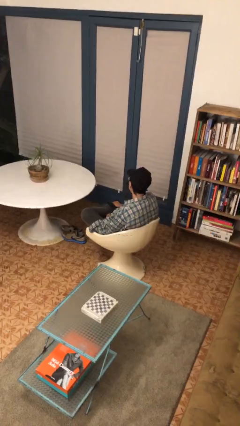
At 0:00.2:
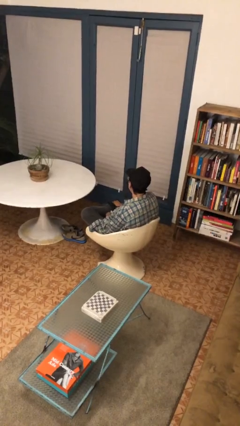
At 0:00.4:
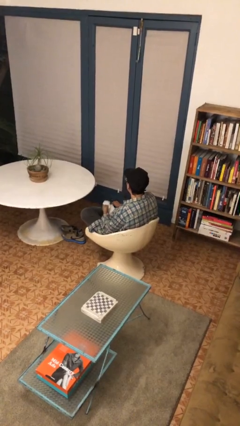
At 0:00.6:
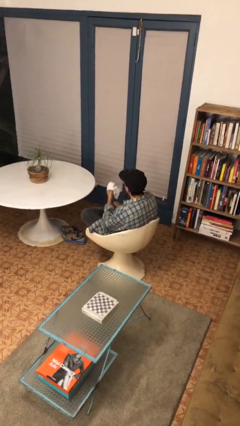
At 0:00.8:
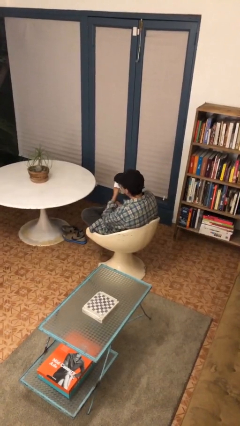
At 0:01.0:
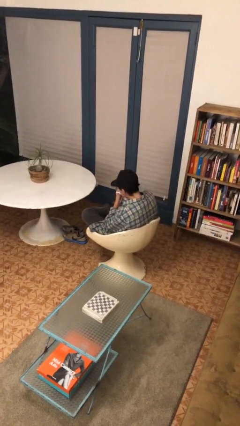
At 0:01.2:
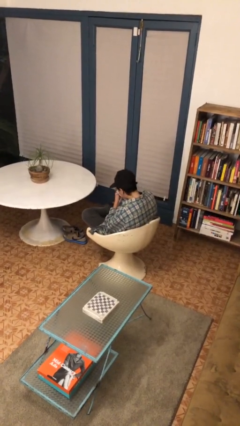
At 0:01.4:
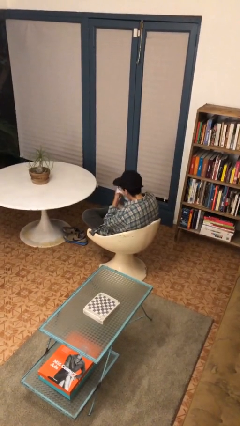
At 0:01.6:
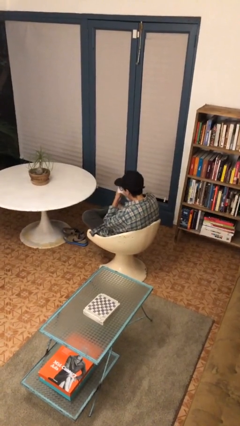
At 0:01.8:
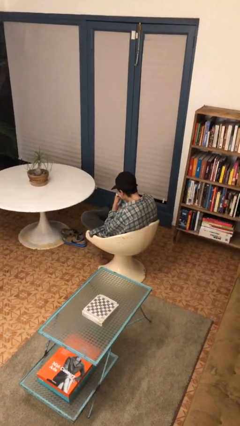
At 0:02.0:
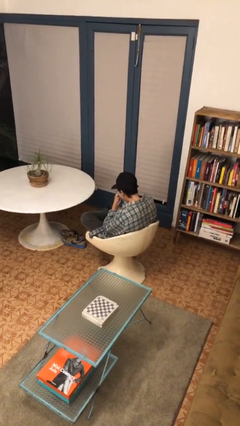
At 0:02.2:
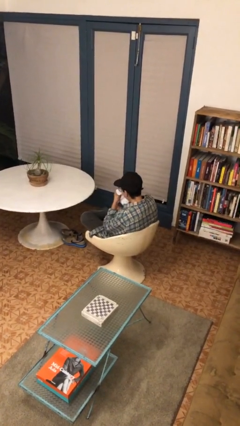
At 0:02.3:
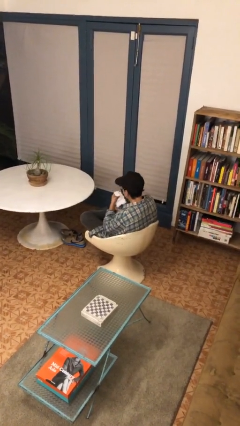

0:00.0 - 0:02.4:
person blows nose

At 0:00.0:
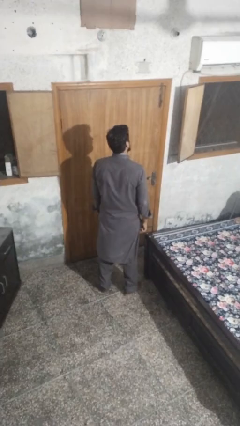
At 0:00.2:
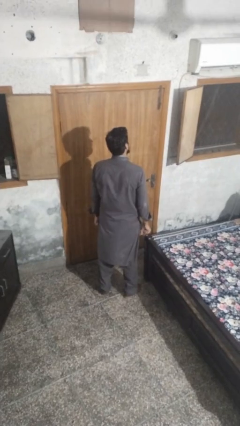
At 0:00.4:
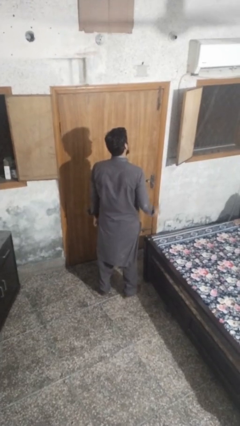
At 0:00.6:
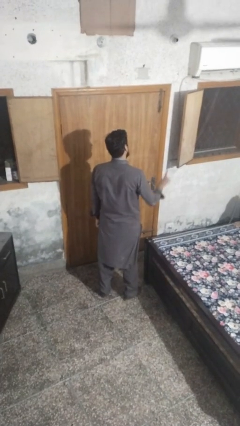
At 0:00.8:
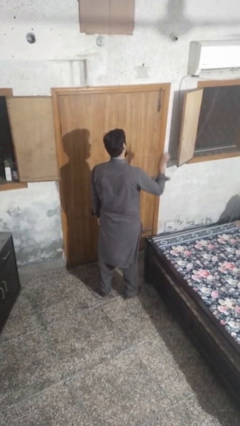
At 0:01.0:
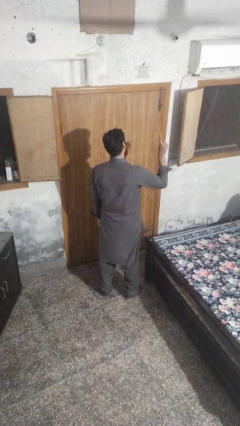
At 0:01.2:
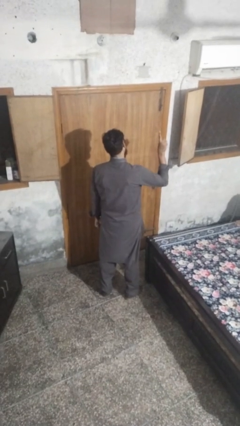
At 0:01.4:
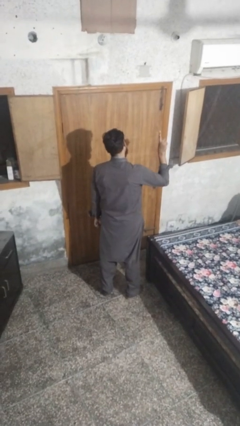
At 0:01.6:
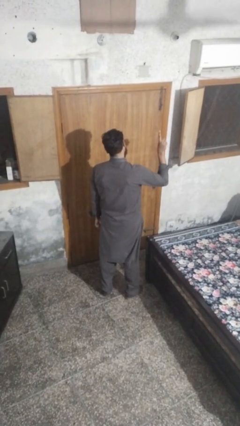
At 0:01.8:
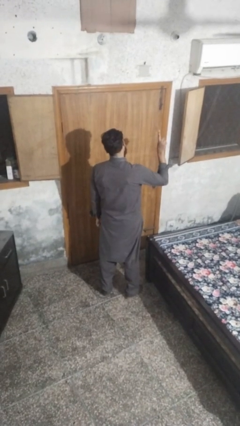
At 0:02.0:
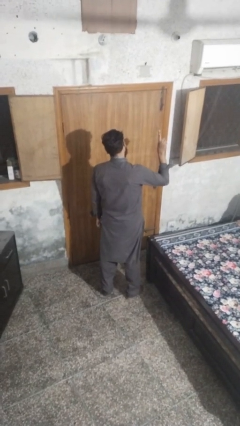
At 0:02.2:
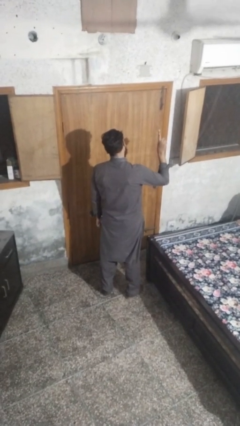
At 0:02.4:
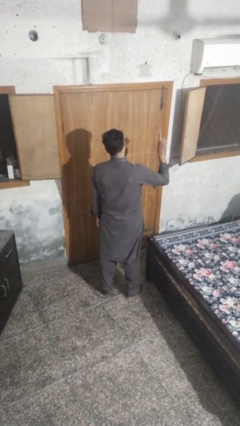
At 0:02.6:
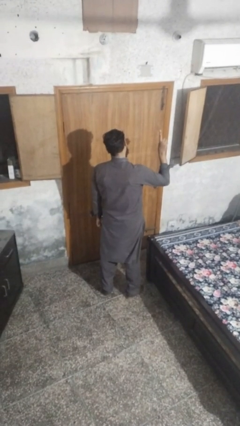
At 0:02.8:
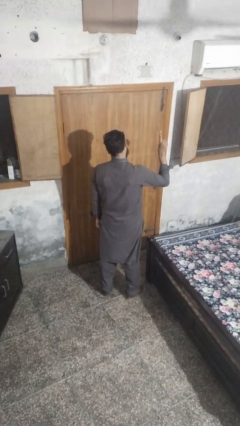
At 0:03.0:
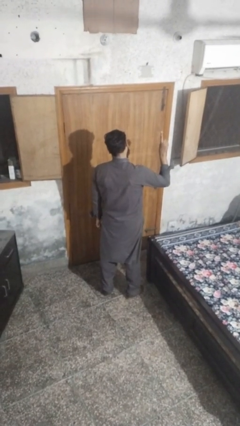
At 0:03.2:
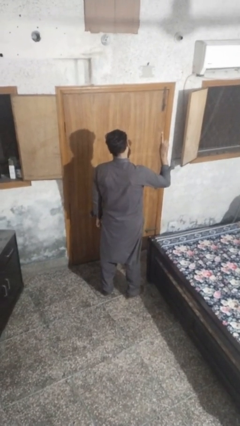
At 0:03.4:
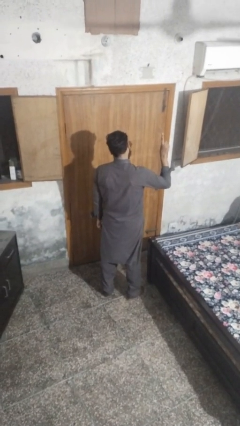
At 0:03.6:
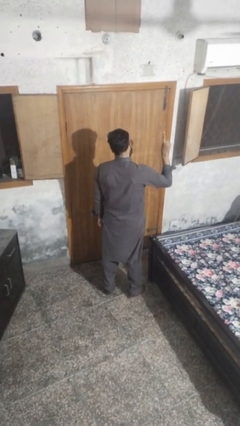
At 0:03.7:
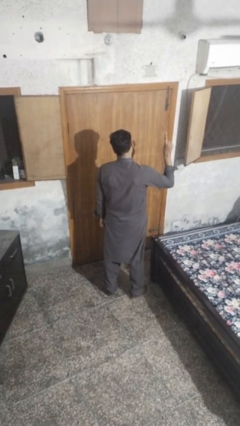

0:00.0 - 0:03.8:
person gestures number one

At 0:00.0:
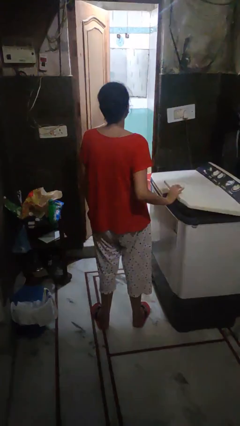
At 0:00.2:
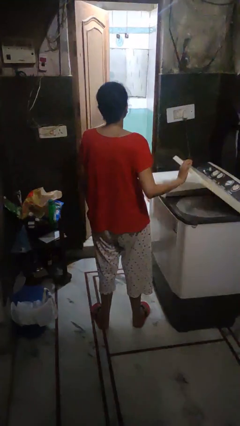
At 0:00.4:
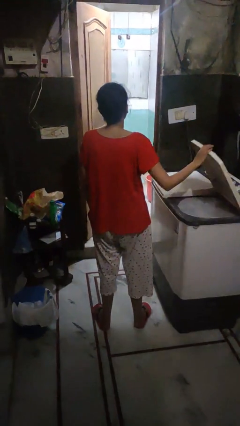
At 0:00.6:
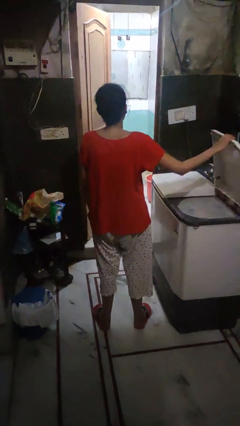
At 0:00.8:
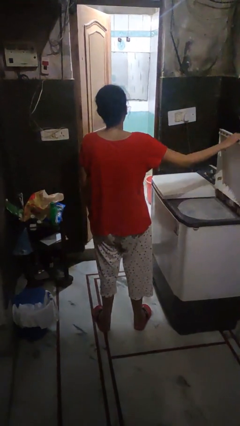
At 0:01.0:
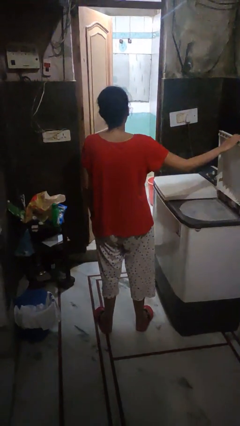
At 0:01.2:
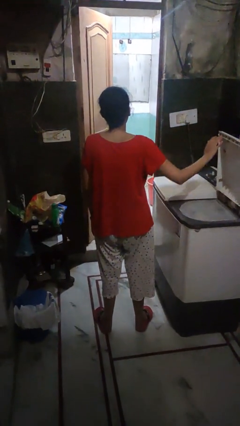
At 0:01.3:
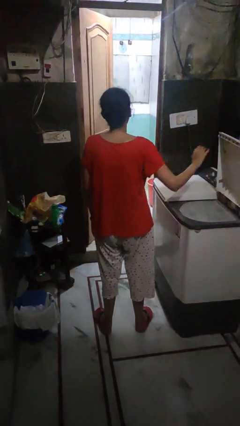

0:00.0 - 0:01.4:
person opens clothes washer

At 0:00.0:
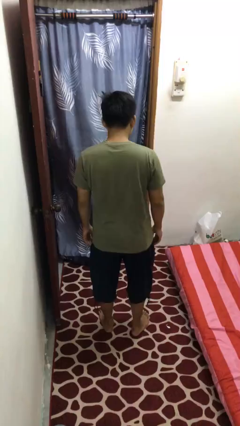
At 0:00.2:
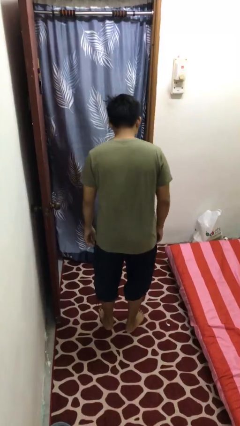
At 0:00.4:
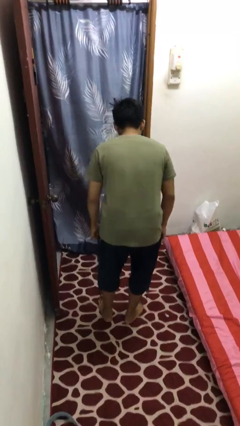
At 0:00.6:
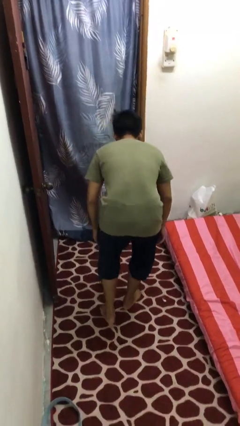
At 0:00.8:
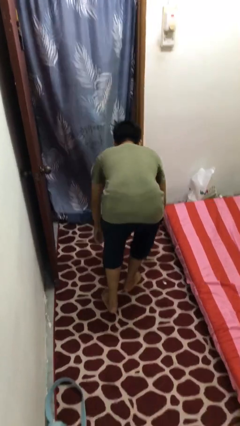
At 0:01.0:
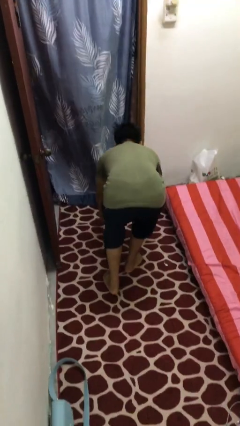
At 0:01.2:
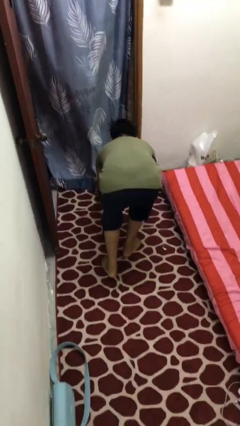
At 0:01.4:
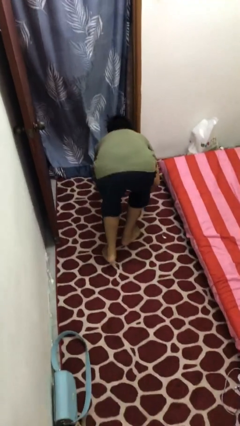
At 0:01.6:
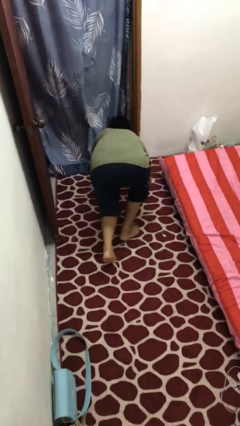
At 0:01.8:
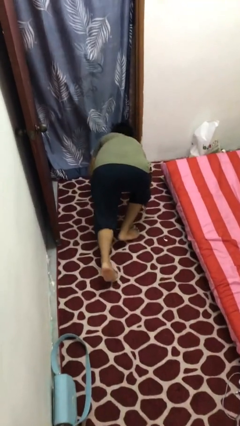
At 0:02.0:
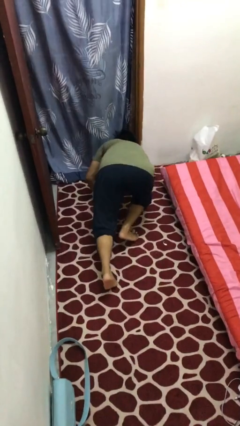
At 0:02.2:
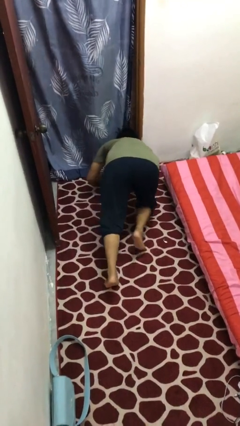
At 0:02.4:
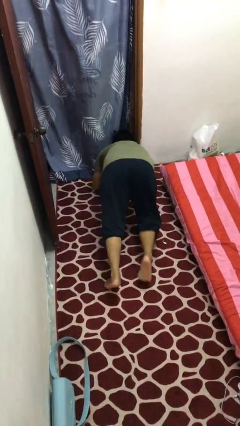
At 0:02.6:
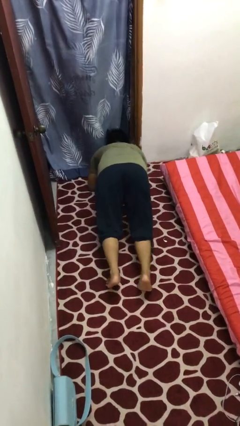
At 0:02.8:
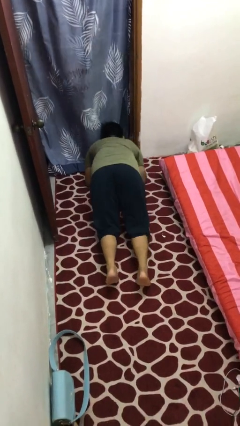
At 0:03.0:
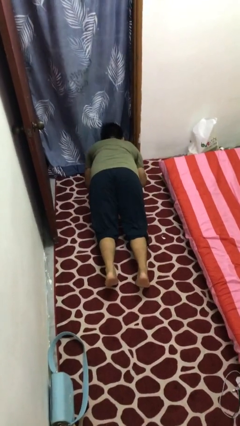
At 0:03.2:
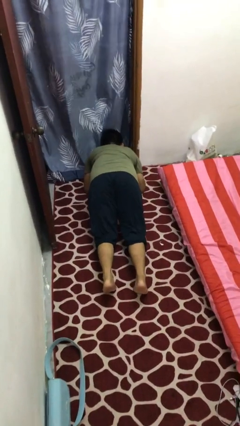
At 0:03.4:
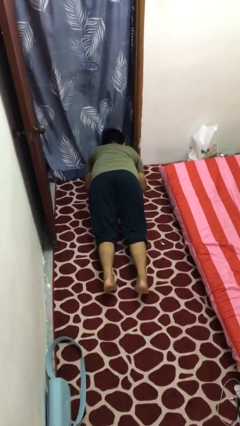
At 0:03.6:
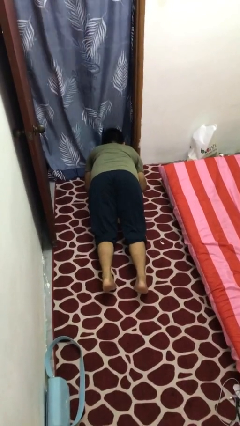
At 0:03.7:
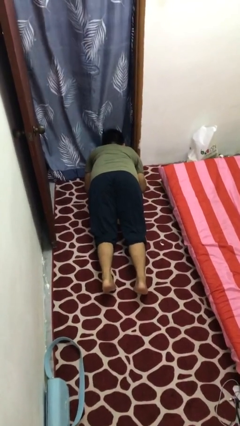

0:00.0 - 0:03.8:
person exercises with plank

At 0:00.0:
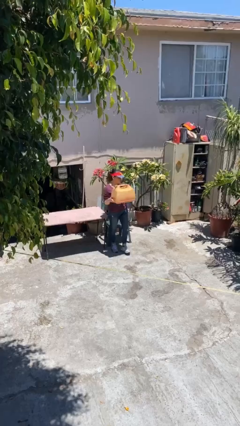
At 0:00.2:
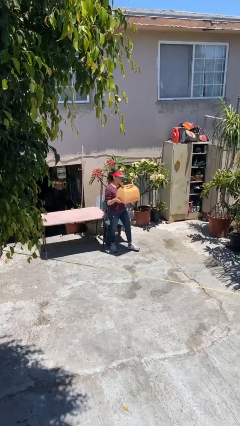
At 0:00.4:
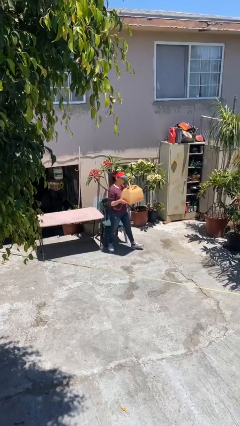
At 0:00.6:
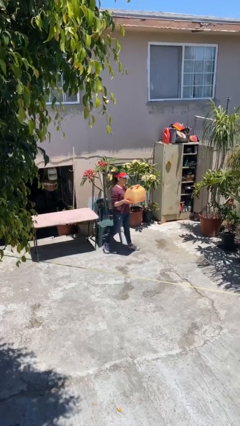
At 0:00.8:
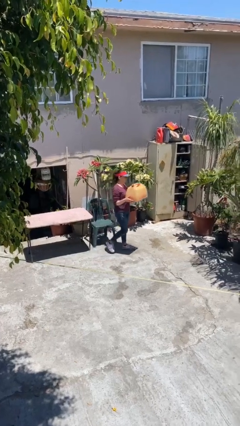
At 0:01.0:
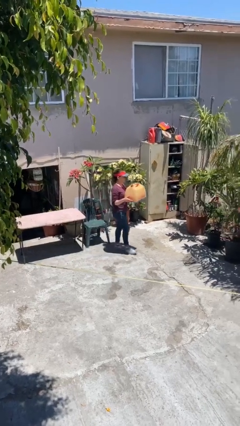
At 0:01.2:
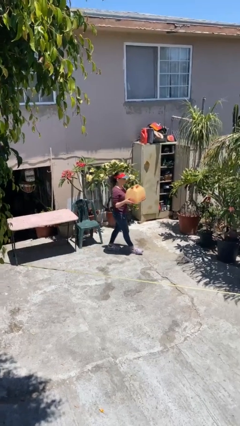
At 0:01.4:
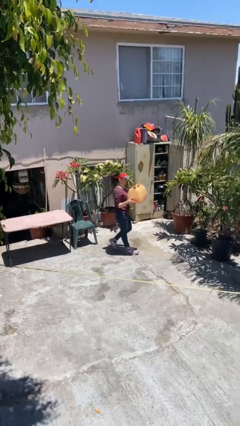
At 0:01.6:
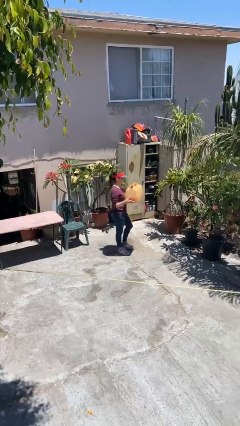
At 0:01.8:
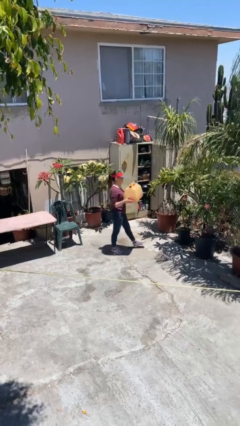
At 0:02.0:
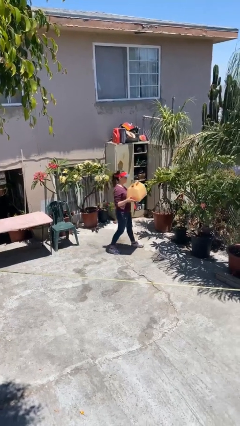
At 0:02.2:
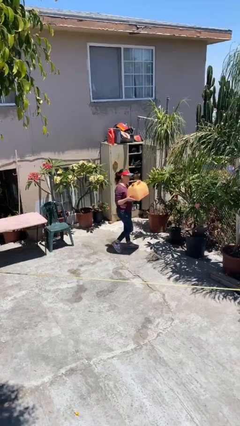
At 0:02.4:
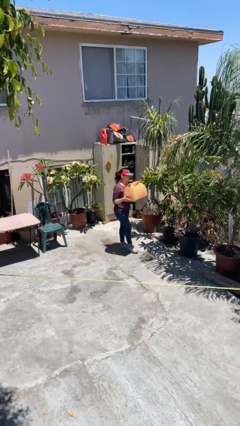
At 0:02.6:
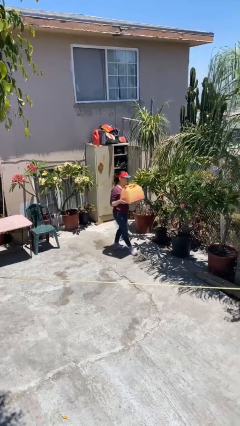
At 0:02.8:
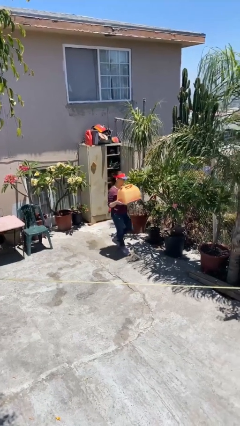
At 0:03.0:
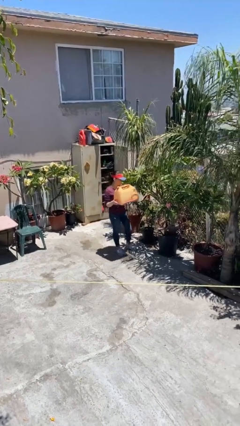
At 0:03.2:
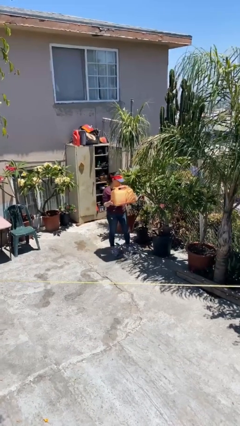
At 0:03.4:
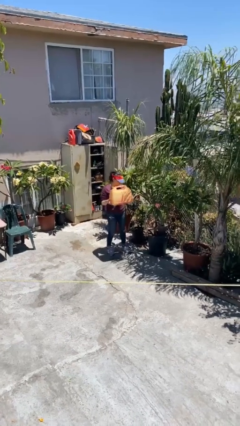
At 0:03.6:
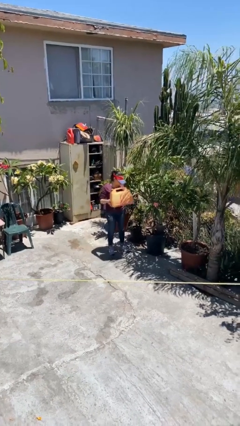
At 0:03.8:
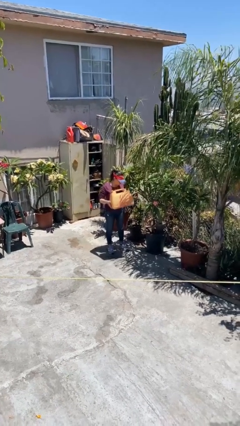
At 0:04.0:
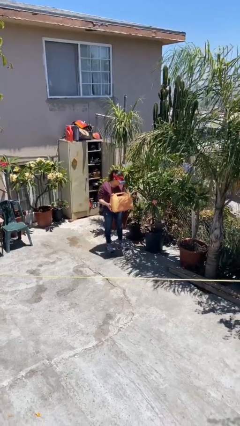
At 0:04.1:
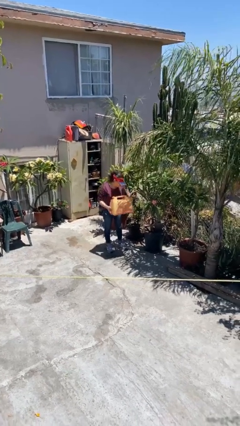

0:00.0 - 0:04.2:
person carries heavy object

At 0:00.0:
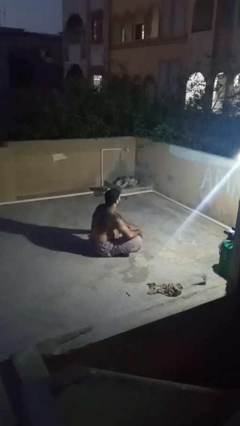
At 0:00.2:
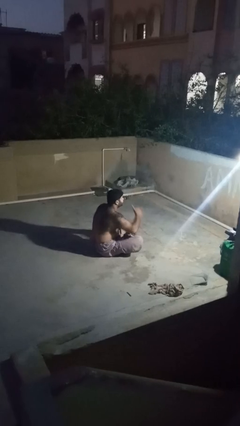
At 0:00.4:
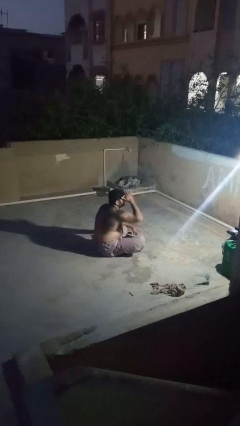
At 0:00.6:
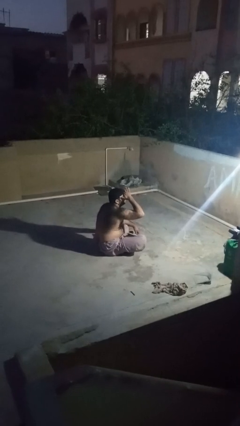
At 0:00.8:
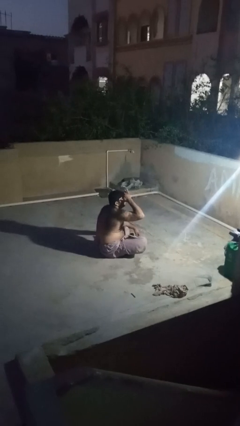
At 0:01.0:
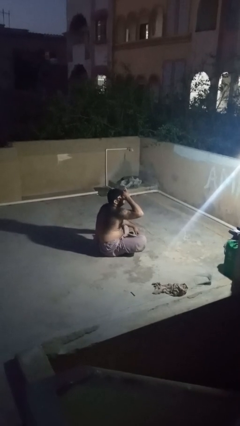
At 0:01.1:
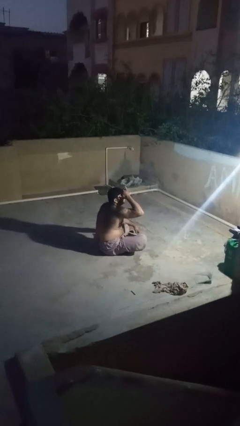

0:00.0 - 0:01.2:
person shades eyes

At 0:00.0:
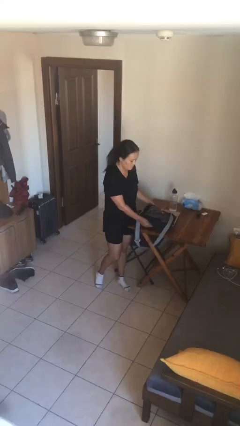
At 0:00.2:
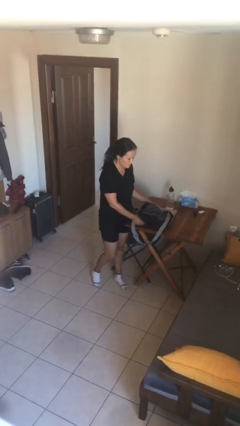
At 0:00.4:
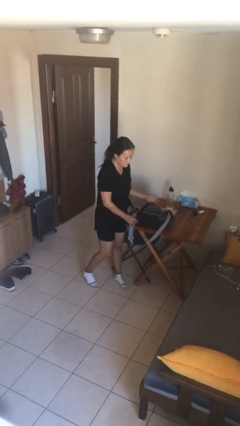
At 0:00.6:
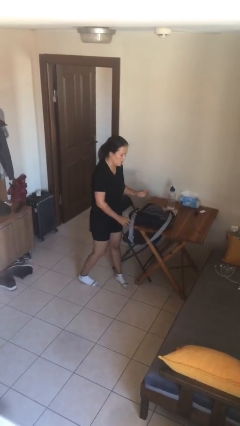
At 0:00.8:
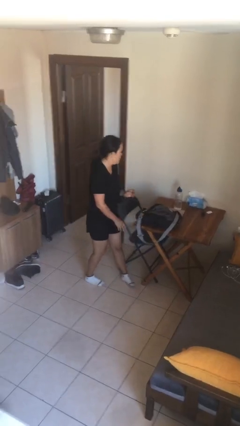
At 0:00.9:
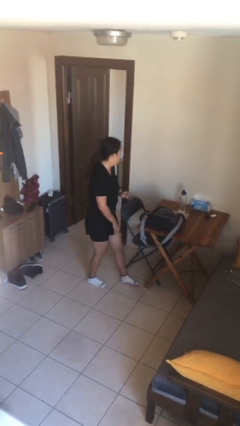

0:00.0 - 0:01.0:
person puts down object on table
